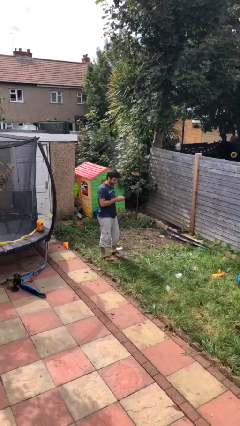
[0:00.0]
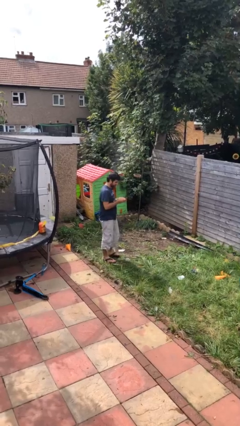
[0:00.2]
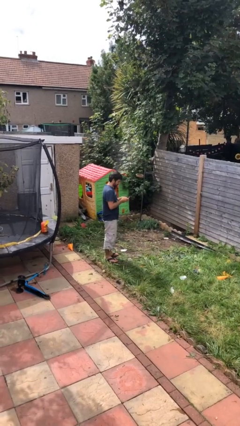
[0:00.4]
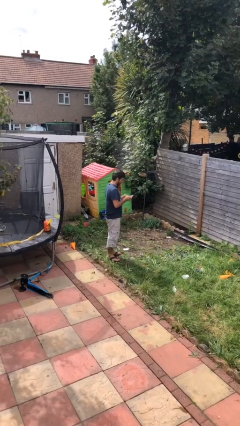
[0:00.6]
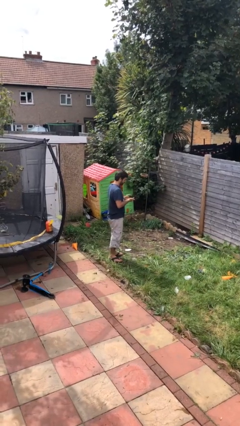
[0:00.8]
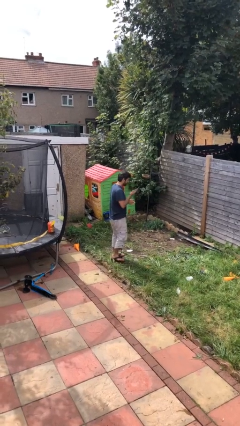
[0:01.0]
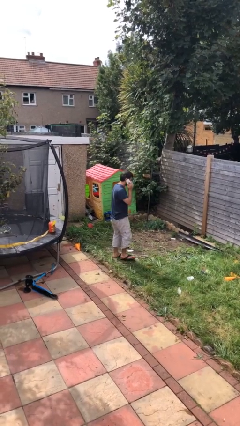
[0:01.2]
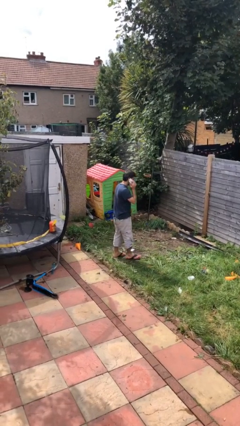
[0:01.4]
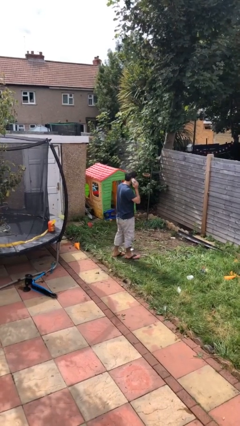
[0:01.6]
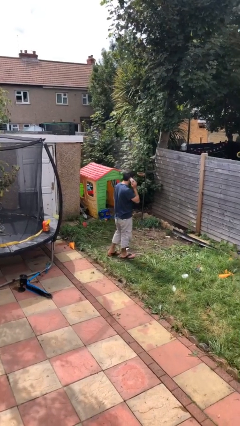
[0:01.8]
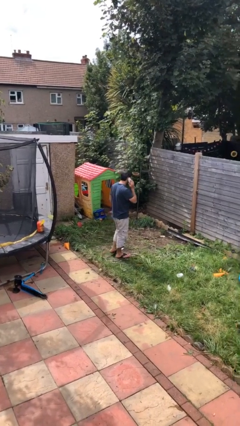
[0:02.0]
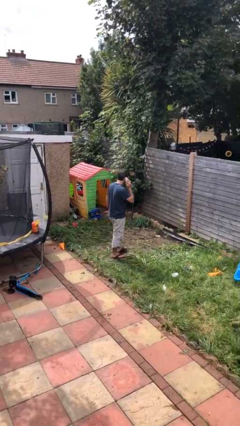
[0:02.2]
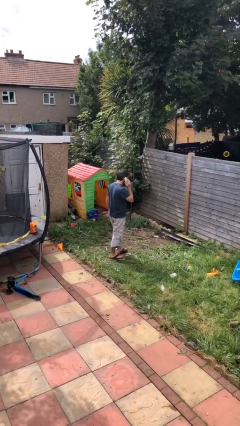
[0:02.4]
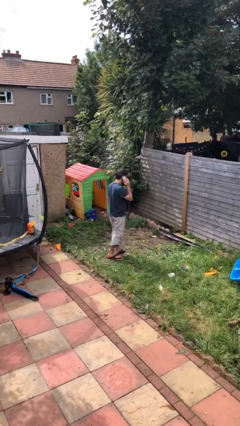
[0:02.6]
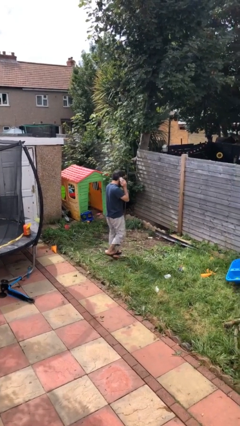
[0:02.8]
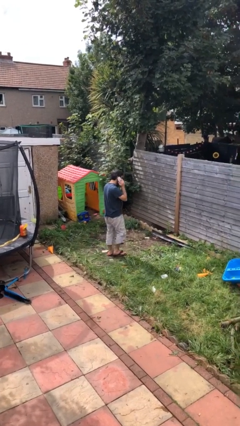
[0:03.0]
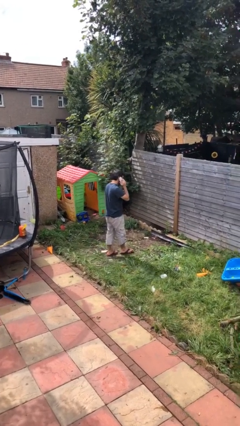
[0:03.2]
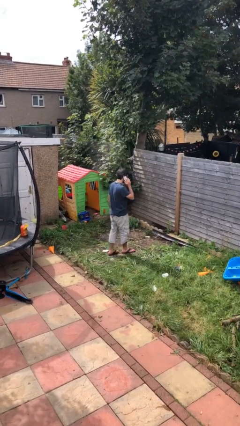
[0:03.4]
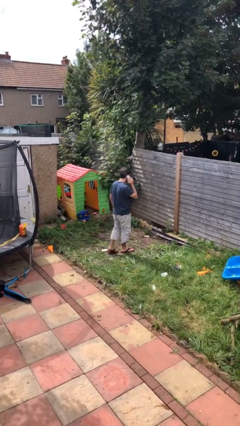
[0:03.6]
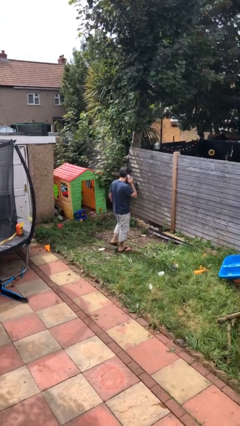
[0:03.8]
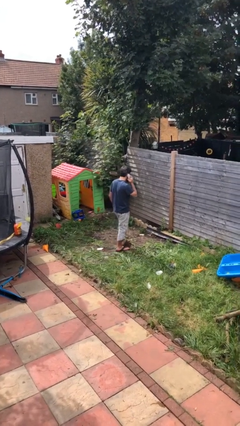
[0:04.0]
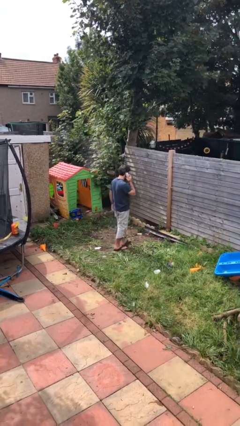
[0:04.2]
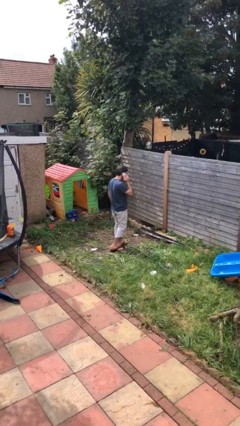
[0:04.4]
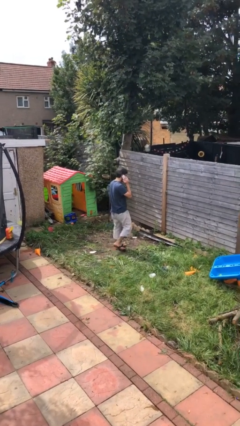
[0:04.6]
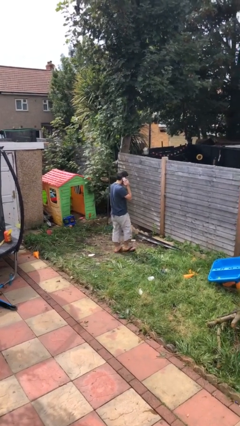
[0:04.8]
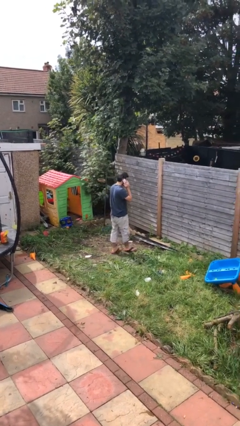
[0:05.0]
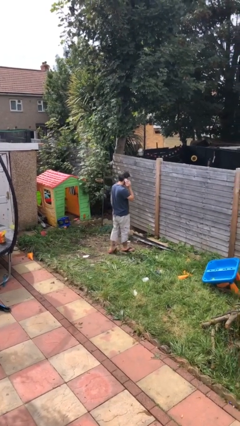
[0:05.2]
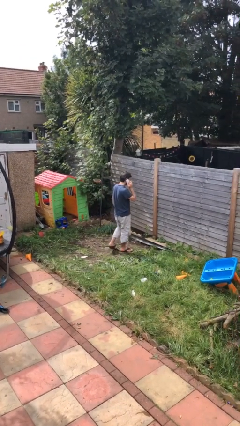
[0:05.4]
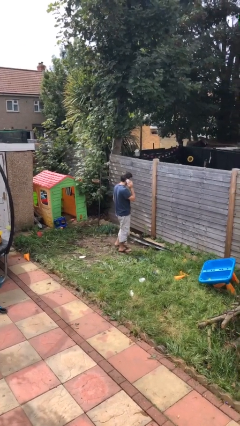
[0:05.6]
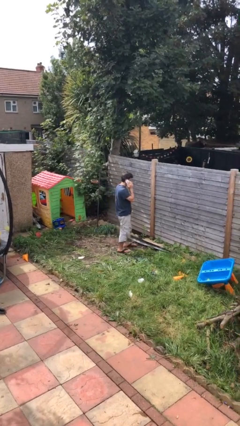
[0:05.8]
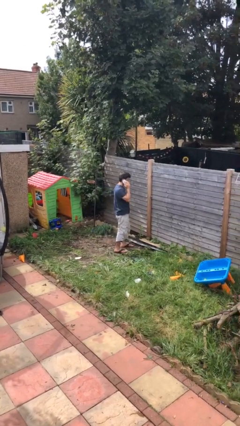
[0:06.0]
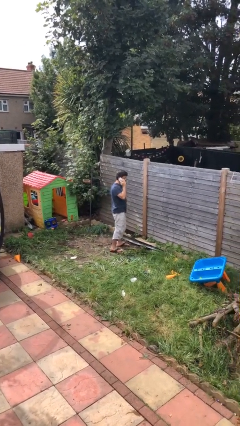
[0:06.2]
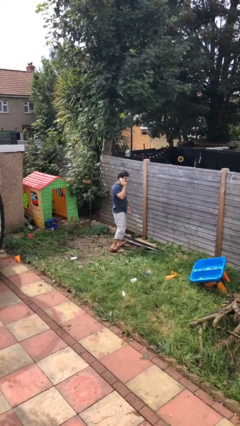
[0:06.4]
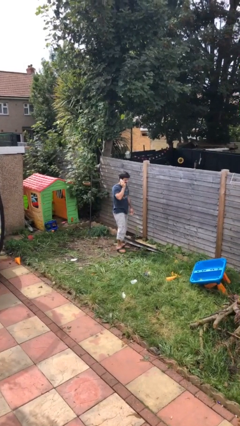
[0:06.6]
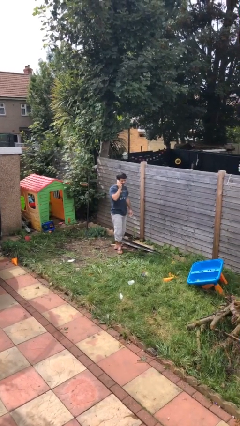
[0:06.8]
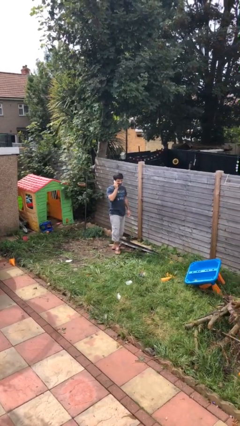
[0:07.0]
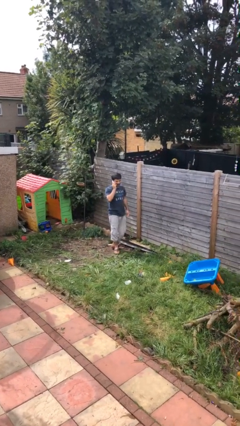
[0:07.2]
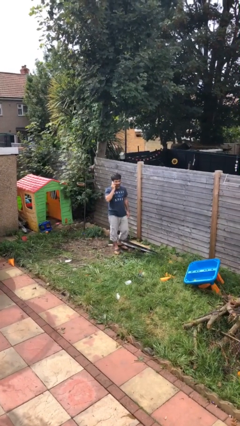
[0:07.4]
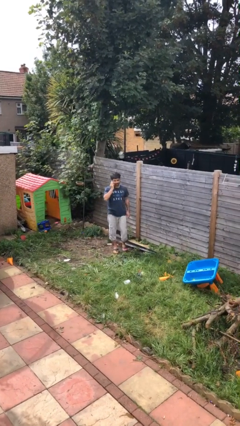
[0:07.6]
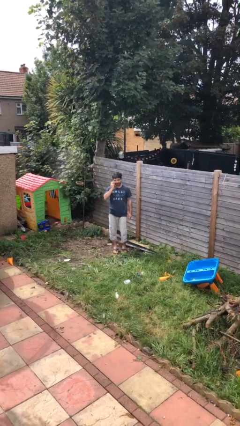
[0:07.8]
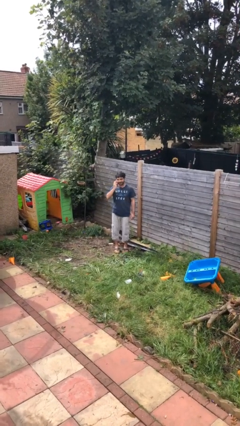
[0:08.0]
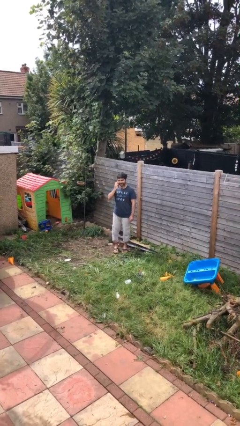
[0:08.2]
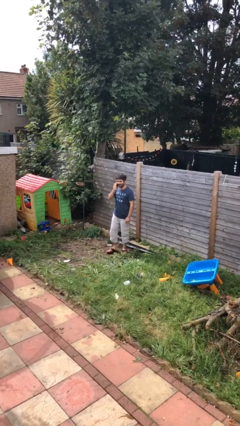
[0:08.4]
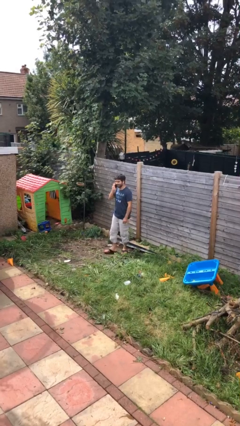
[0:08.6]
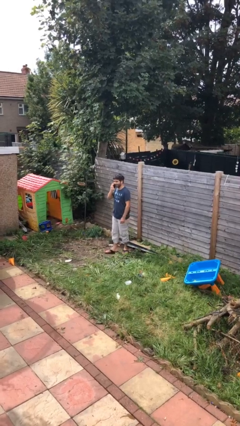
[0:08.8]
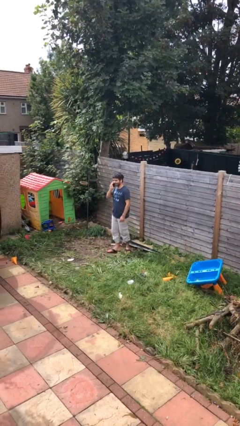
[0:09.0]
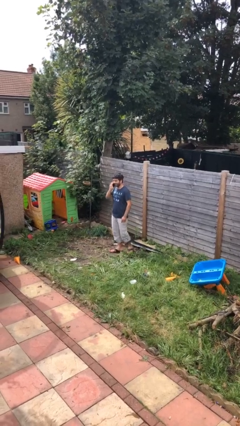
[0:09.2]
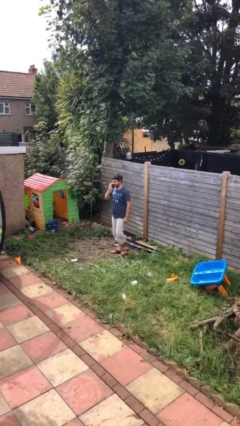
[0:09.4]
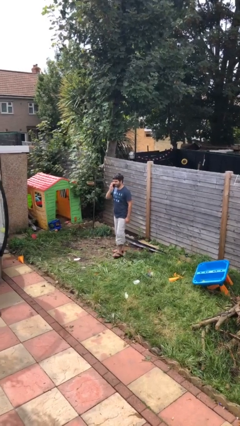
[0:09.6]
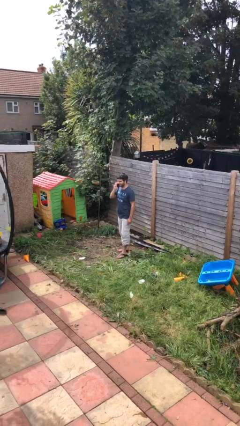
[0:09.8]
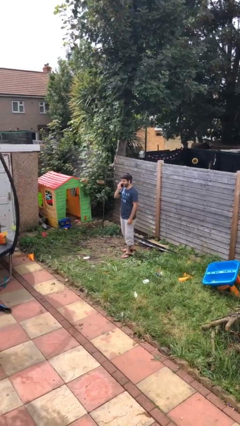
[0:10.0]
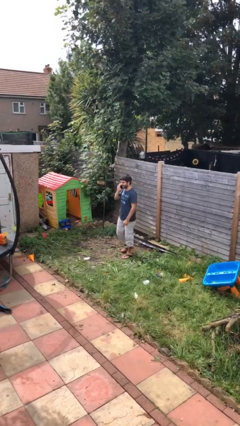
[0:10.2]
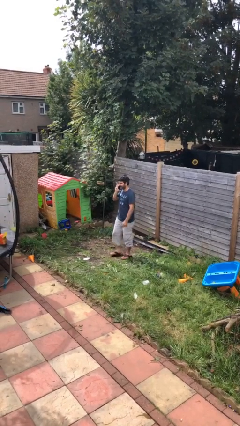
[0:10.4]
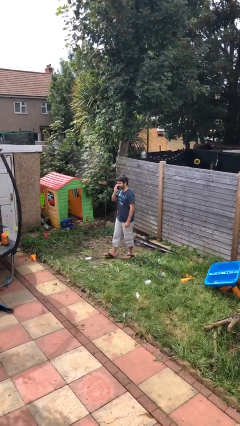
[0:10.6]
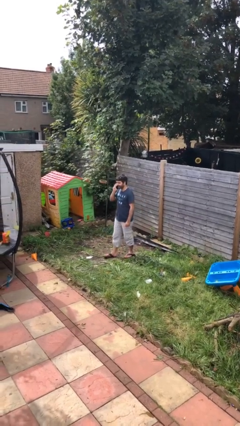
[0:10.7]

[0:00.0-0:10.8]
person talks on phone

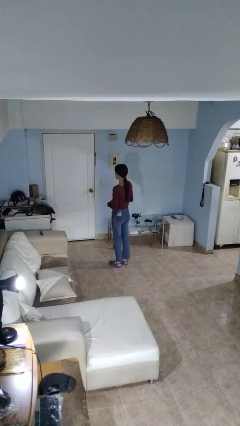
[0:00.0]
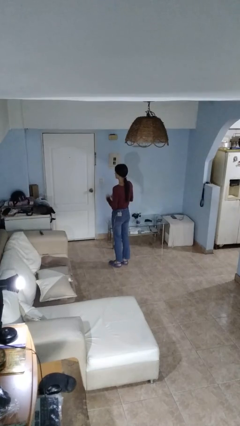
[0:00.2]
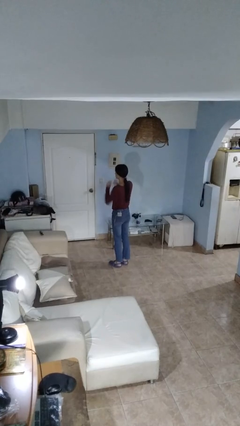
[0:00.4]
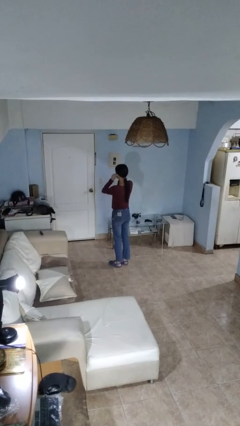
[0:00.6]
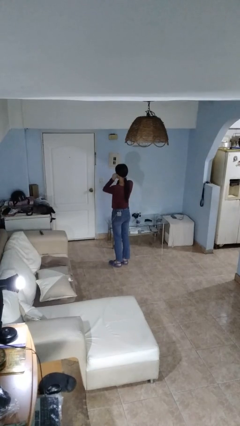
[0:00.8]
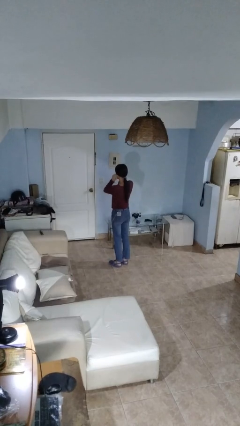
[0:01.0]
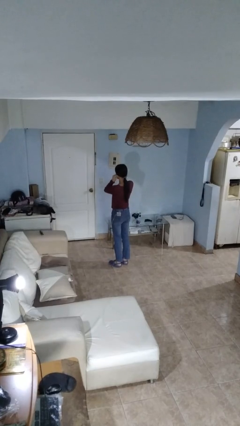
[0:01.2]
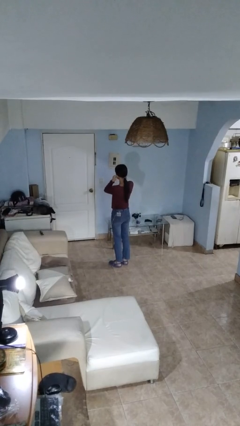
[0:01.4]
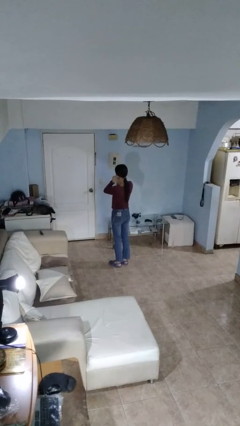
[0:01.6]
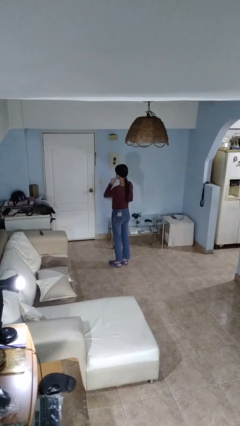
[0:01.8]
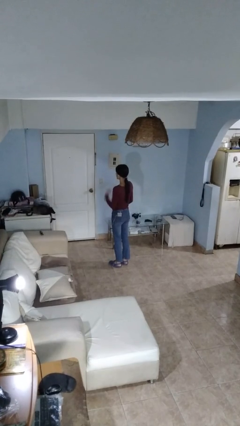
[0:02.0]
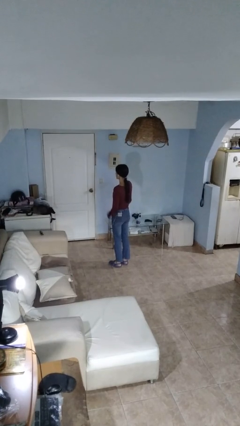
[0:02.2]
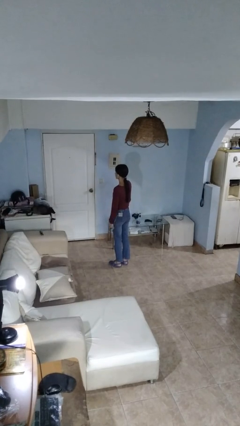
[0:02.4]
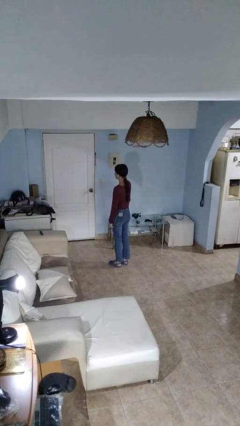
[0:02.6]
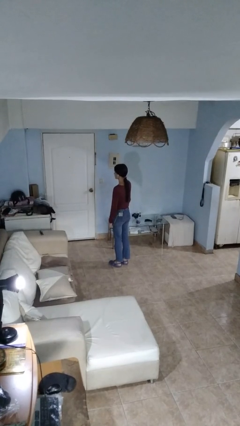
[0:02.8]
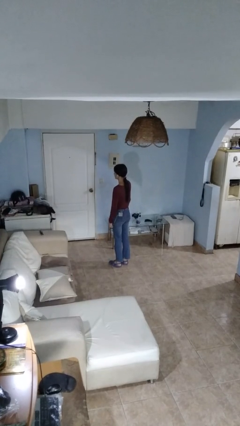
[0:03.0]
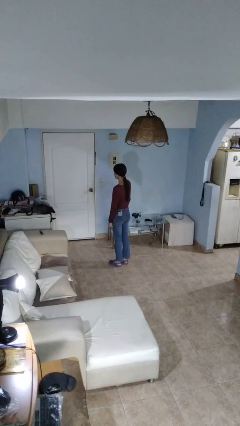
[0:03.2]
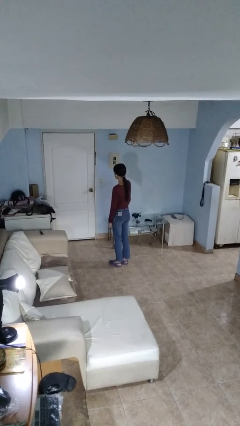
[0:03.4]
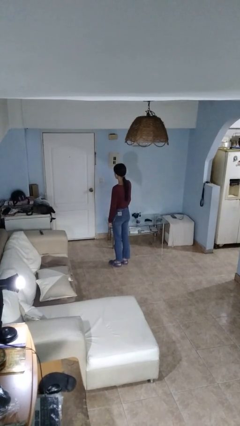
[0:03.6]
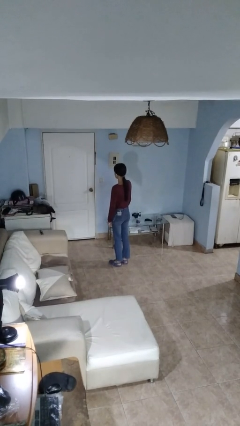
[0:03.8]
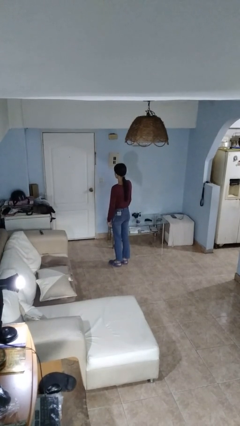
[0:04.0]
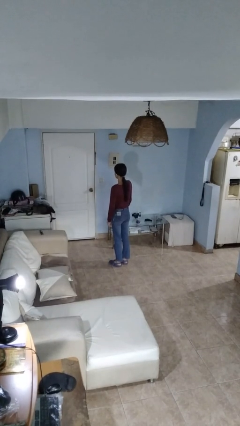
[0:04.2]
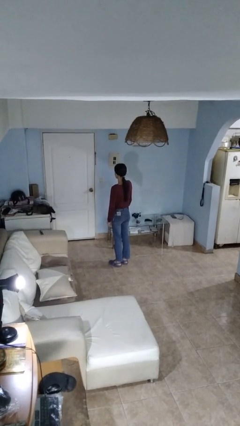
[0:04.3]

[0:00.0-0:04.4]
person puts on headphones

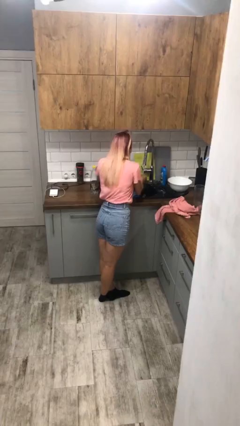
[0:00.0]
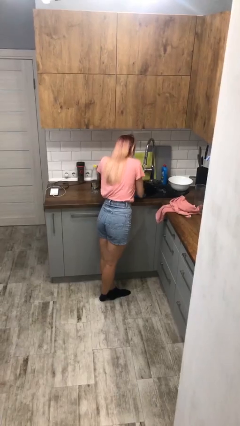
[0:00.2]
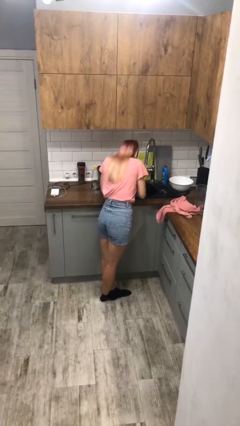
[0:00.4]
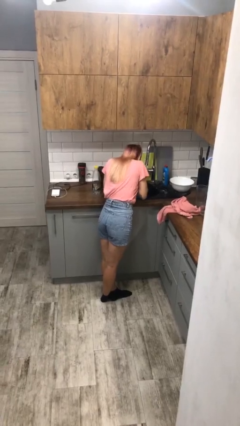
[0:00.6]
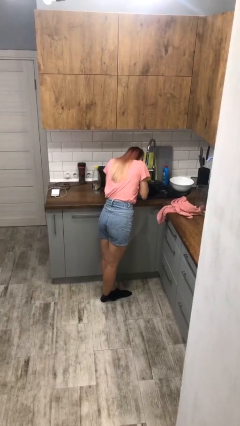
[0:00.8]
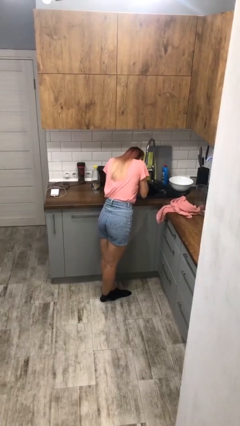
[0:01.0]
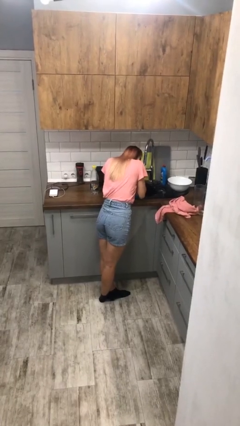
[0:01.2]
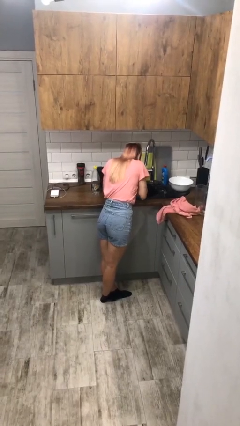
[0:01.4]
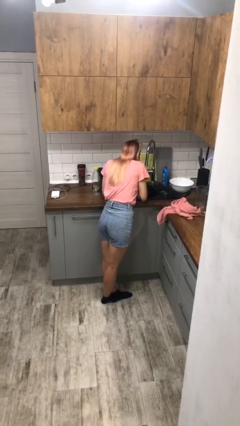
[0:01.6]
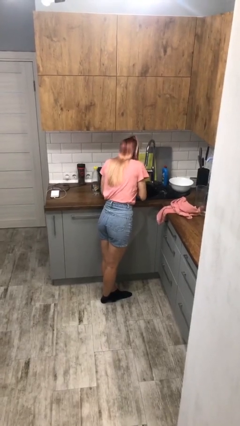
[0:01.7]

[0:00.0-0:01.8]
person washes face

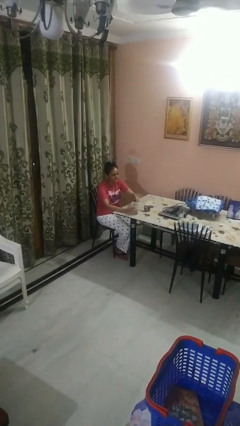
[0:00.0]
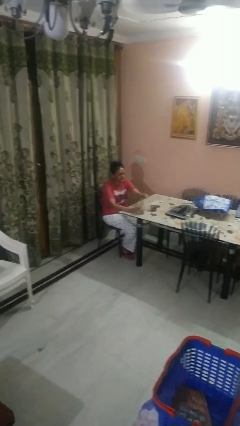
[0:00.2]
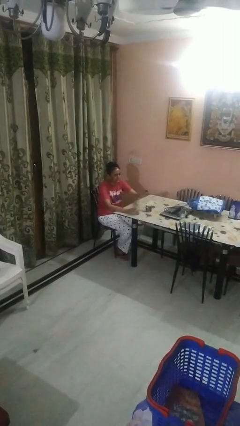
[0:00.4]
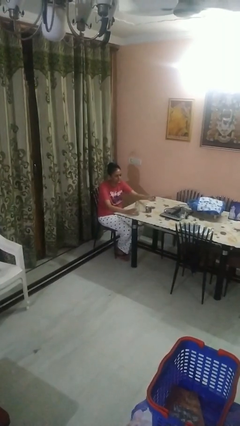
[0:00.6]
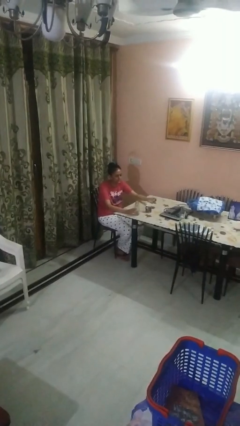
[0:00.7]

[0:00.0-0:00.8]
person unscrews lid from bottle
